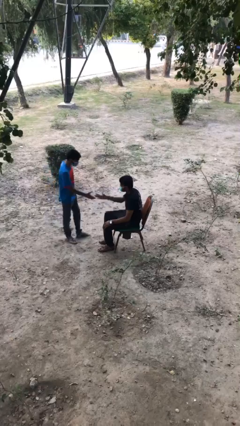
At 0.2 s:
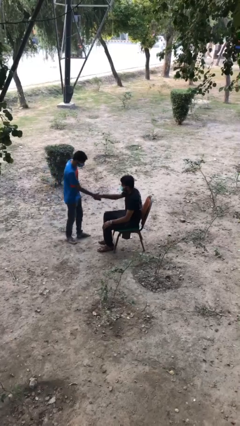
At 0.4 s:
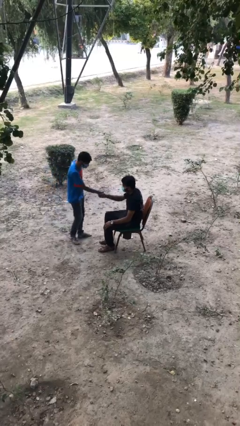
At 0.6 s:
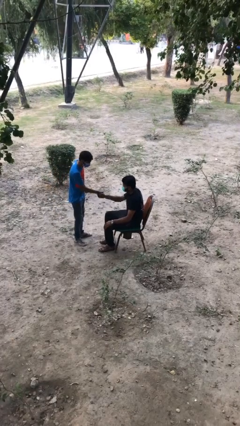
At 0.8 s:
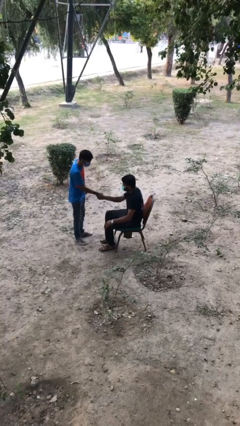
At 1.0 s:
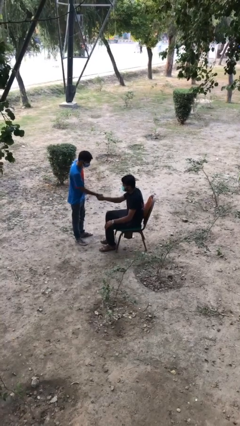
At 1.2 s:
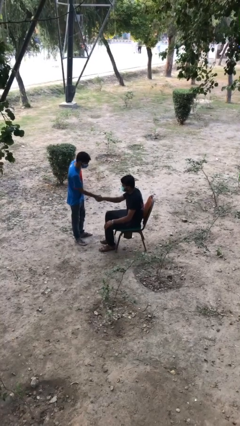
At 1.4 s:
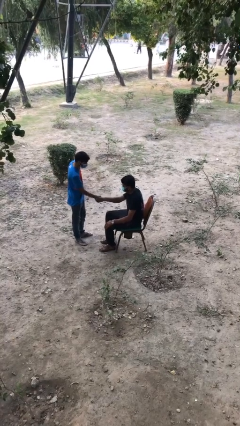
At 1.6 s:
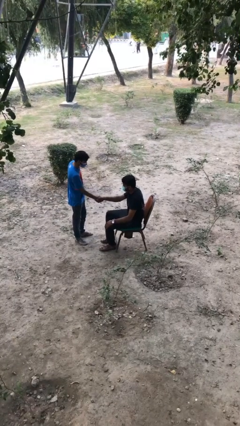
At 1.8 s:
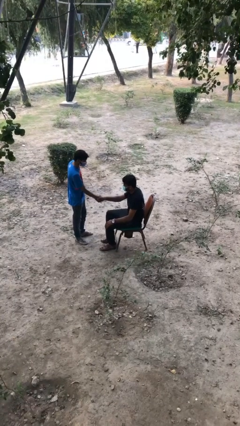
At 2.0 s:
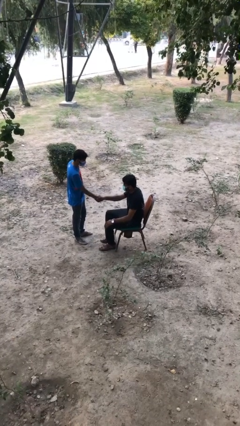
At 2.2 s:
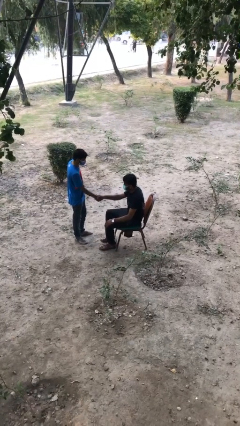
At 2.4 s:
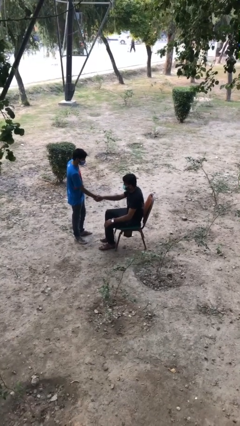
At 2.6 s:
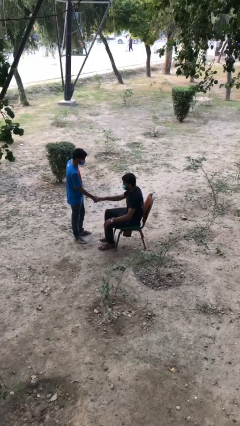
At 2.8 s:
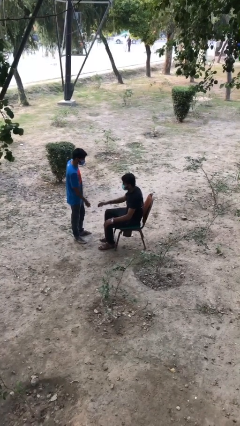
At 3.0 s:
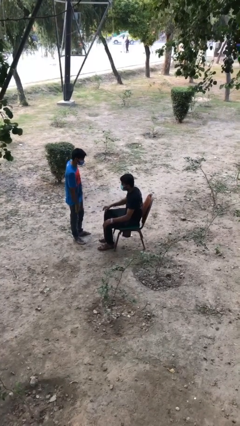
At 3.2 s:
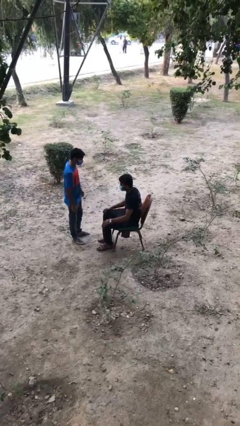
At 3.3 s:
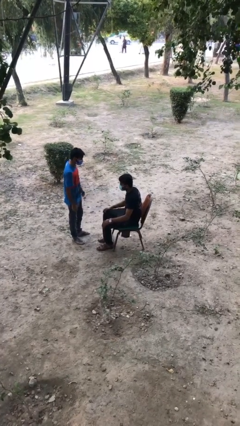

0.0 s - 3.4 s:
person shakes hand

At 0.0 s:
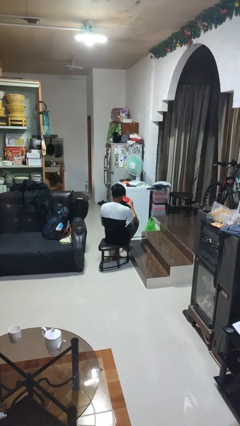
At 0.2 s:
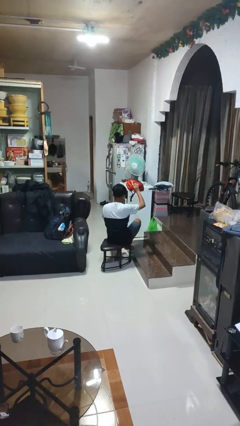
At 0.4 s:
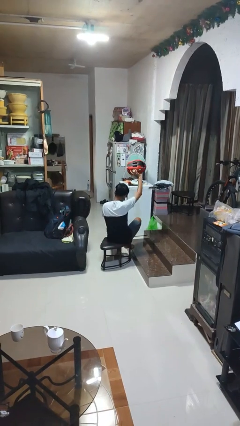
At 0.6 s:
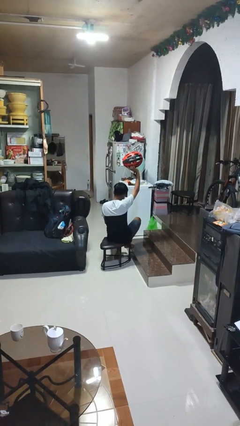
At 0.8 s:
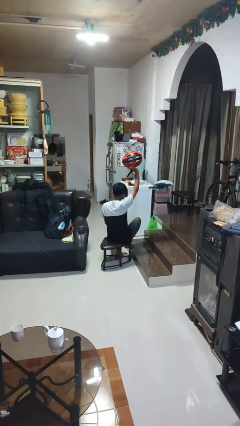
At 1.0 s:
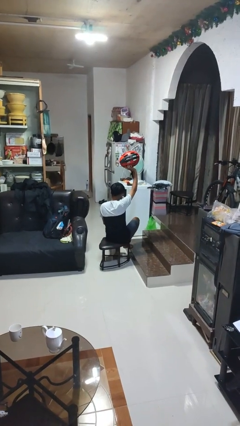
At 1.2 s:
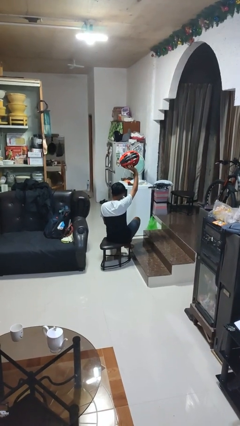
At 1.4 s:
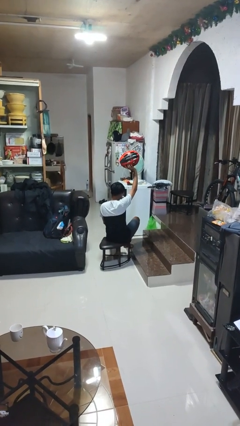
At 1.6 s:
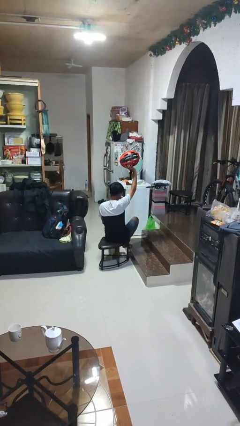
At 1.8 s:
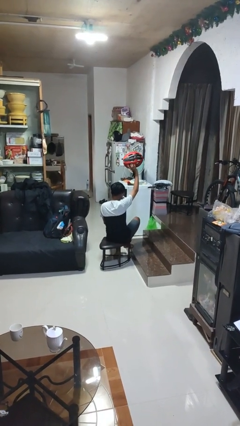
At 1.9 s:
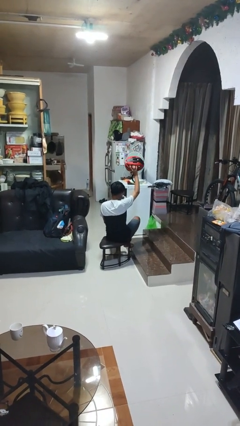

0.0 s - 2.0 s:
person holds object above head

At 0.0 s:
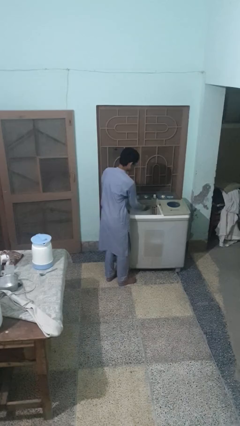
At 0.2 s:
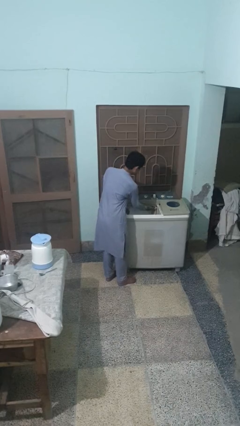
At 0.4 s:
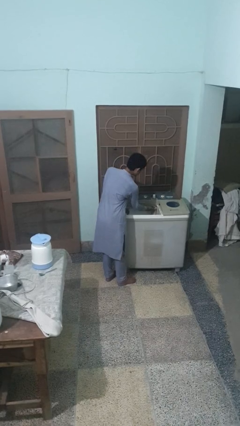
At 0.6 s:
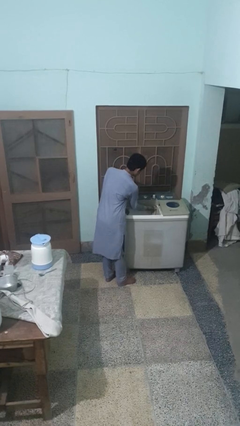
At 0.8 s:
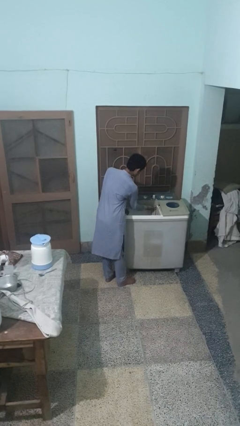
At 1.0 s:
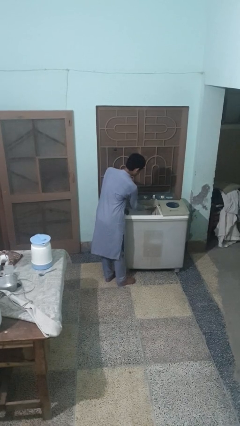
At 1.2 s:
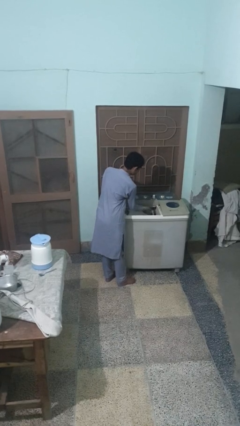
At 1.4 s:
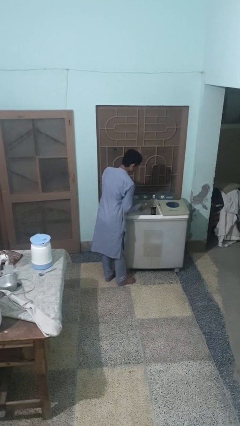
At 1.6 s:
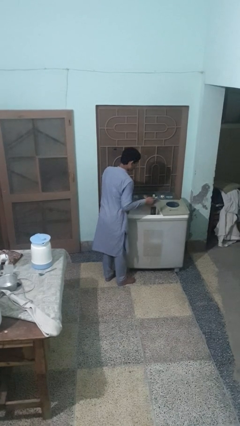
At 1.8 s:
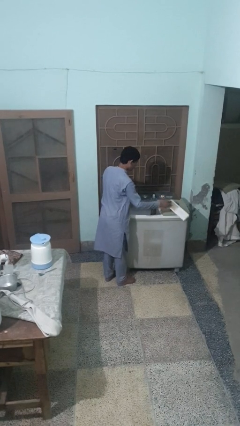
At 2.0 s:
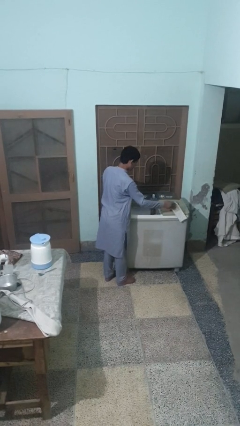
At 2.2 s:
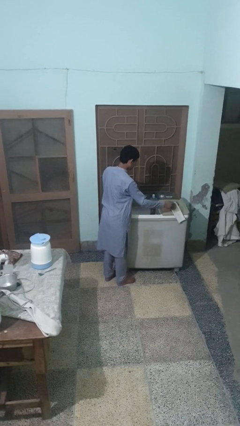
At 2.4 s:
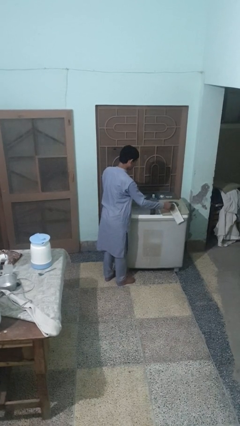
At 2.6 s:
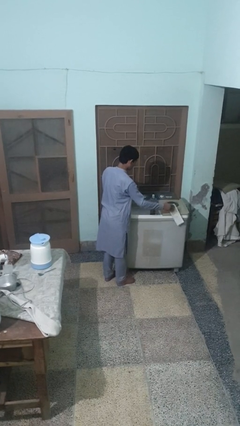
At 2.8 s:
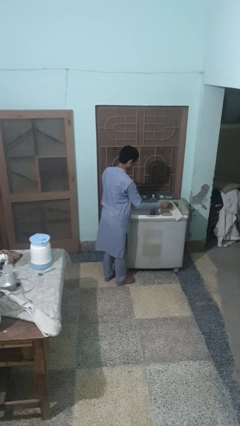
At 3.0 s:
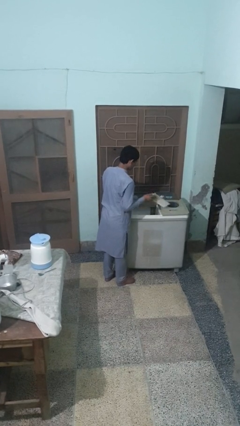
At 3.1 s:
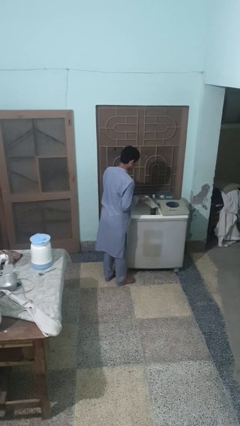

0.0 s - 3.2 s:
person cleans dryer lint trap

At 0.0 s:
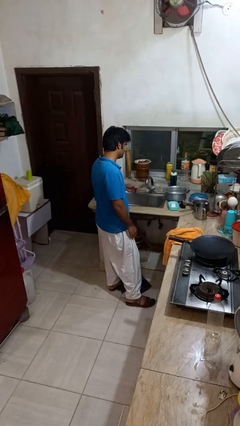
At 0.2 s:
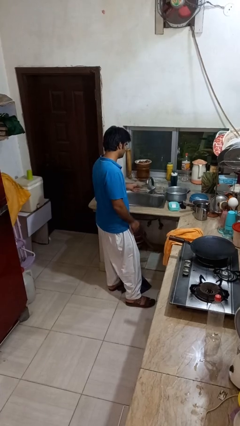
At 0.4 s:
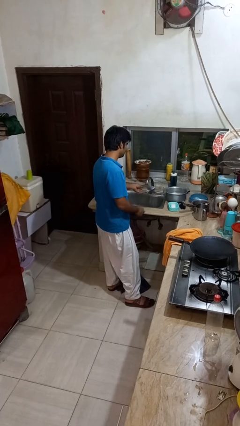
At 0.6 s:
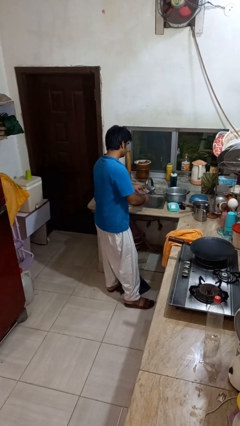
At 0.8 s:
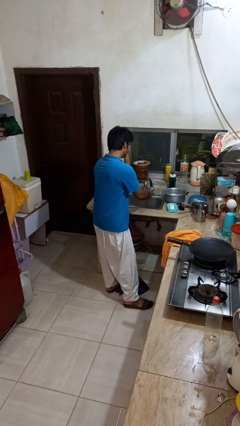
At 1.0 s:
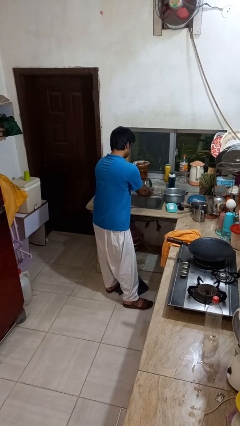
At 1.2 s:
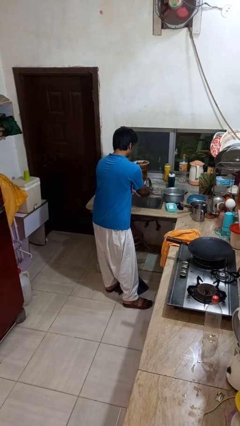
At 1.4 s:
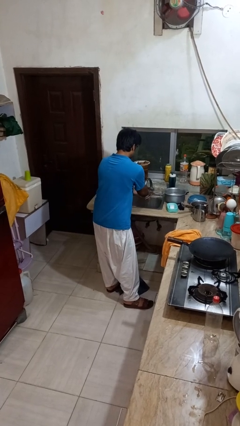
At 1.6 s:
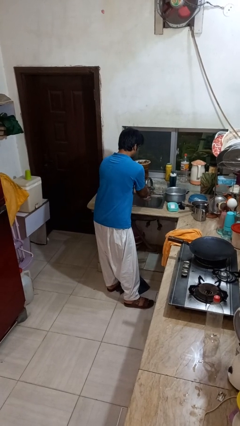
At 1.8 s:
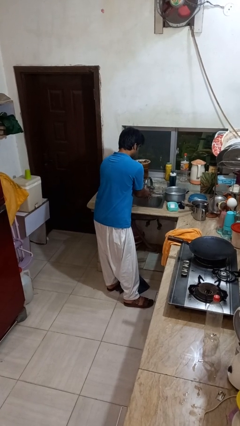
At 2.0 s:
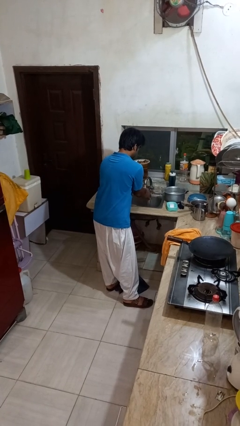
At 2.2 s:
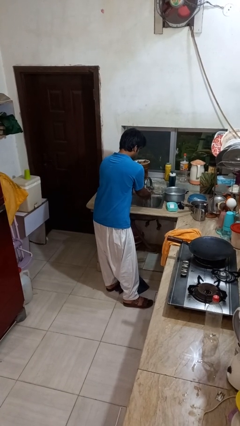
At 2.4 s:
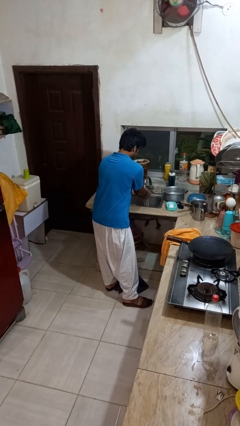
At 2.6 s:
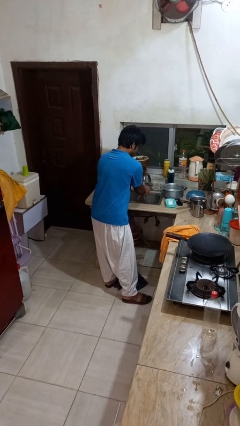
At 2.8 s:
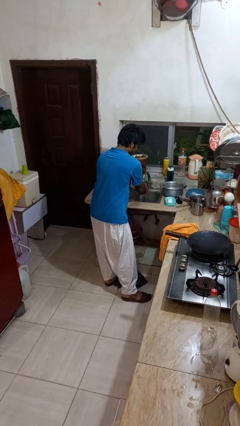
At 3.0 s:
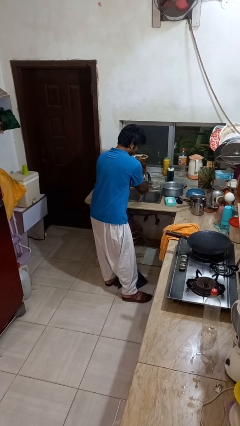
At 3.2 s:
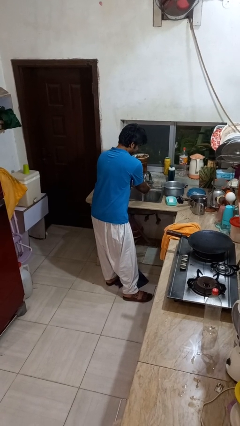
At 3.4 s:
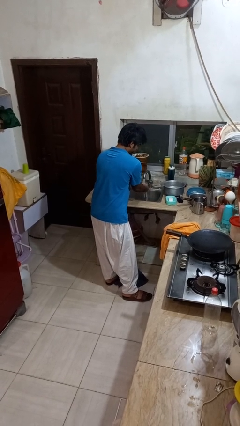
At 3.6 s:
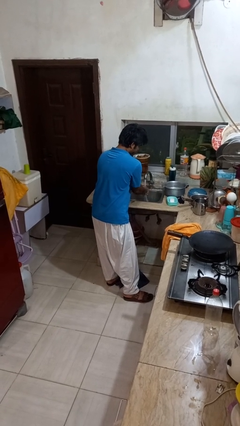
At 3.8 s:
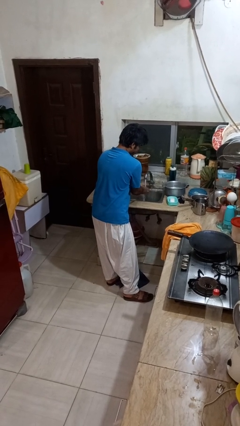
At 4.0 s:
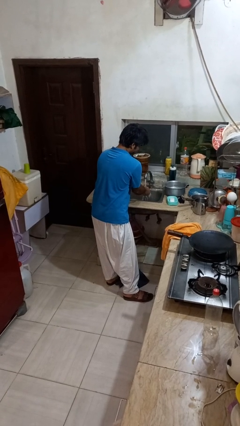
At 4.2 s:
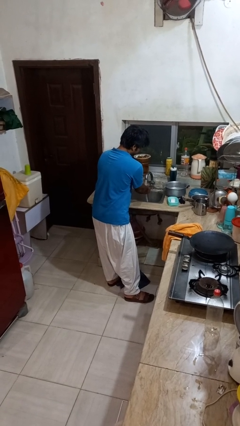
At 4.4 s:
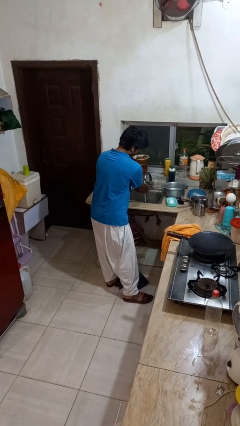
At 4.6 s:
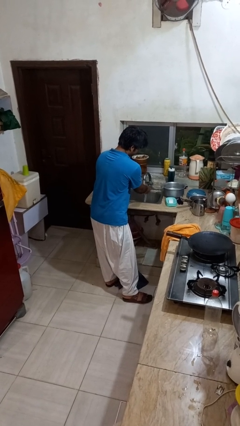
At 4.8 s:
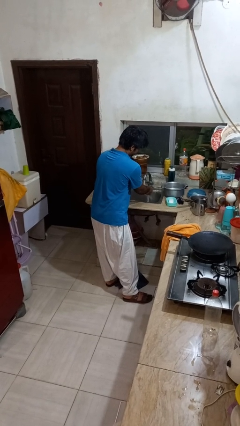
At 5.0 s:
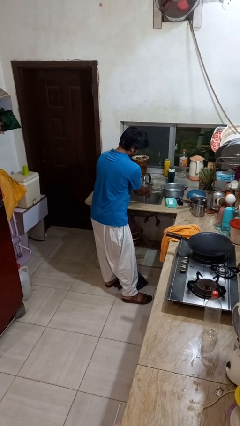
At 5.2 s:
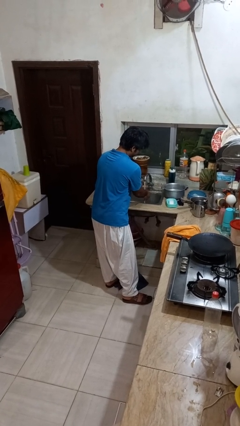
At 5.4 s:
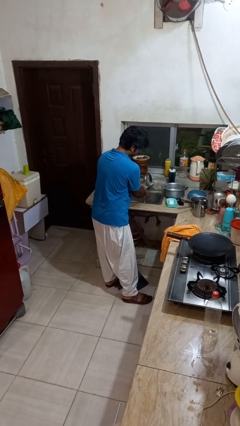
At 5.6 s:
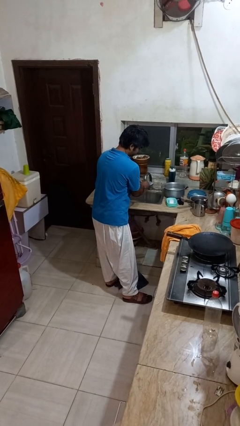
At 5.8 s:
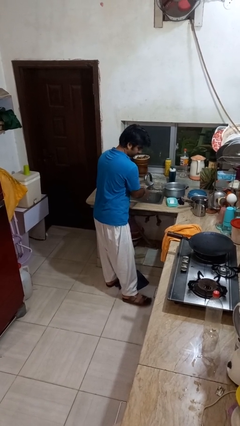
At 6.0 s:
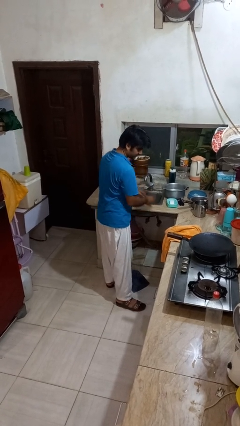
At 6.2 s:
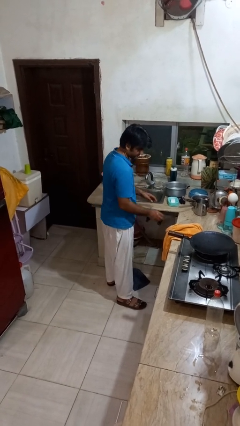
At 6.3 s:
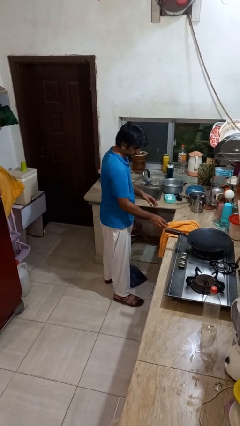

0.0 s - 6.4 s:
person washes hands

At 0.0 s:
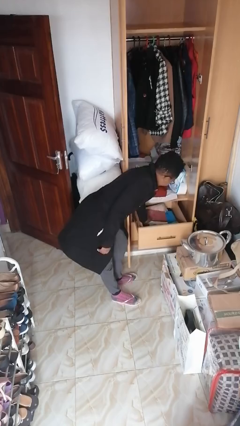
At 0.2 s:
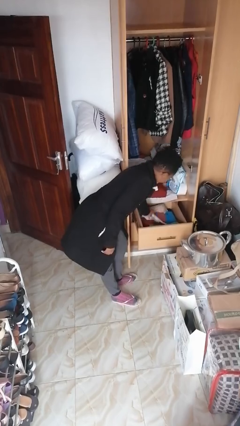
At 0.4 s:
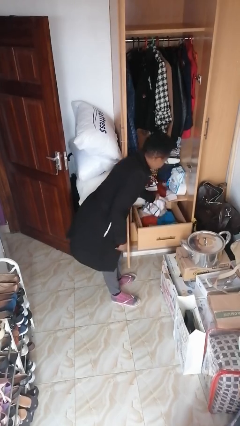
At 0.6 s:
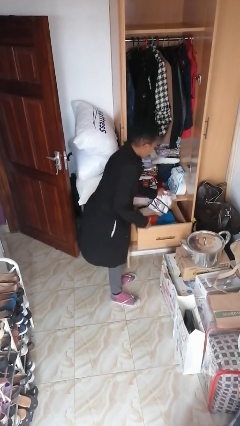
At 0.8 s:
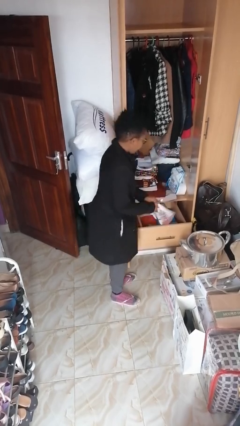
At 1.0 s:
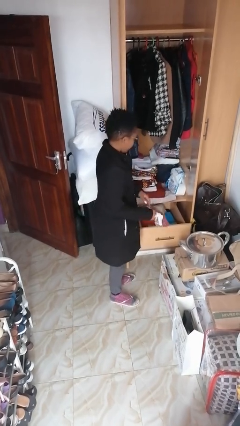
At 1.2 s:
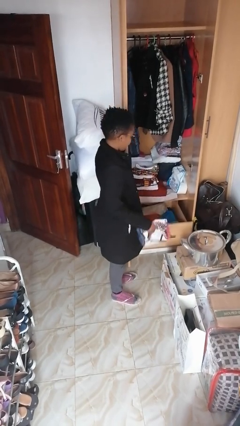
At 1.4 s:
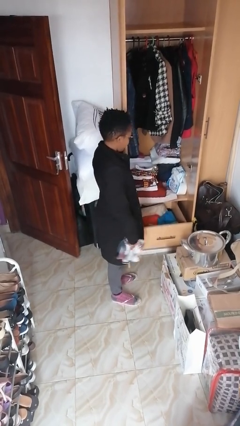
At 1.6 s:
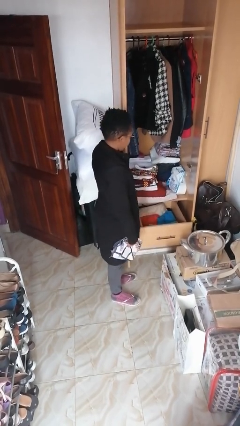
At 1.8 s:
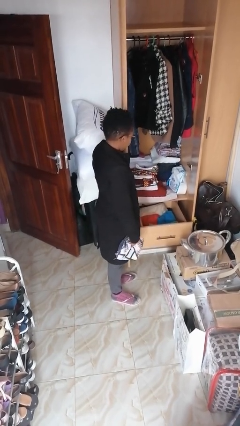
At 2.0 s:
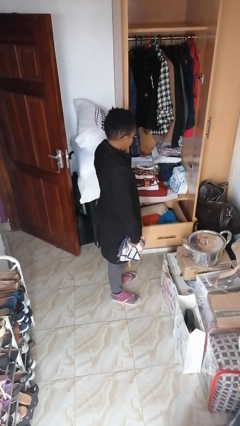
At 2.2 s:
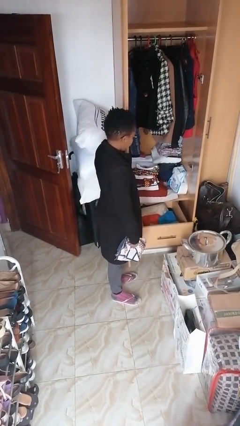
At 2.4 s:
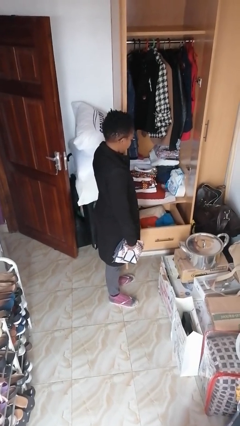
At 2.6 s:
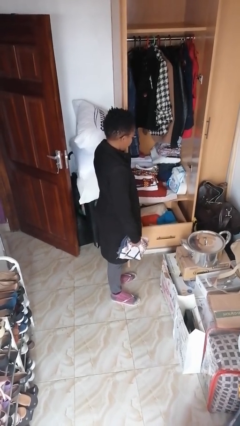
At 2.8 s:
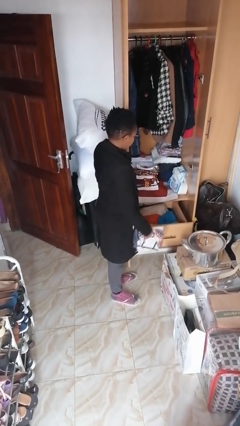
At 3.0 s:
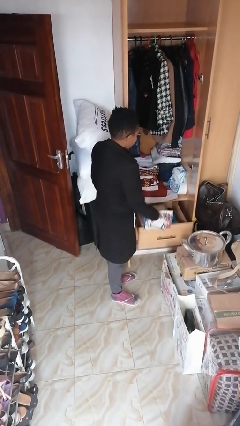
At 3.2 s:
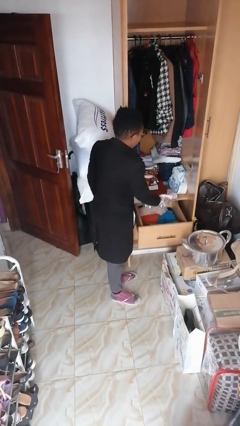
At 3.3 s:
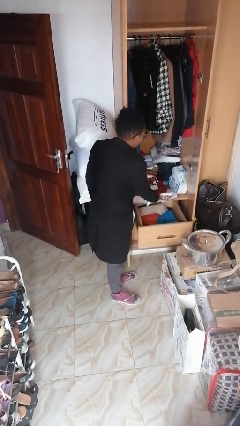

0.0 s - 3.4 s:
person pets cat
